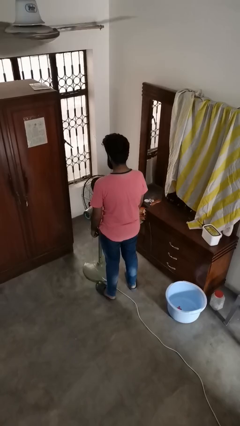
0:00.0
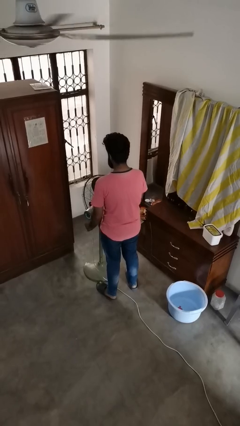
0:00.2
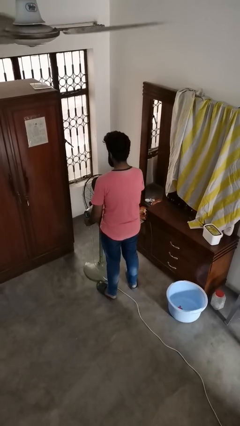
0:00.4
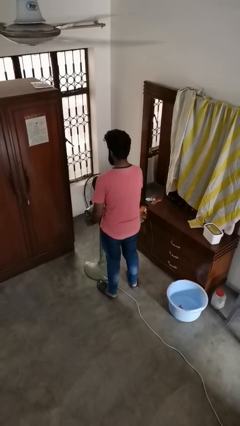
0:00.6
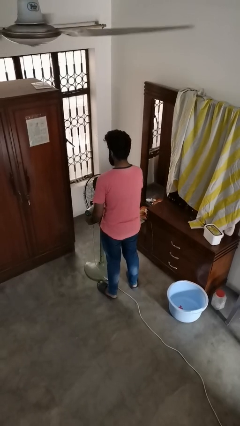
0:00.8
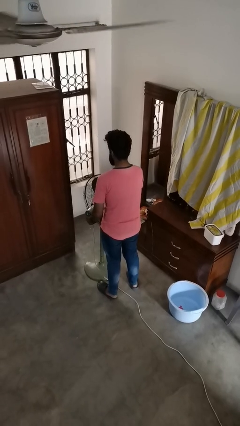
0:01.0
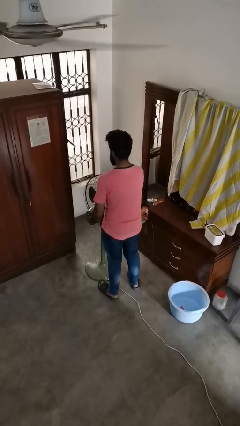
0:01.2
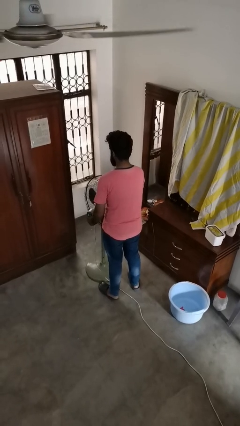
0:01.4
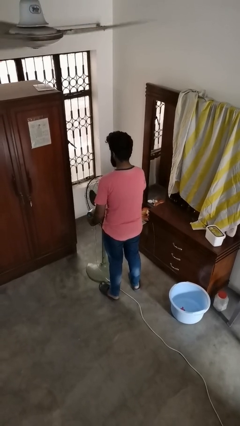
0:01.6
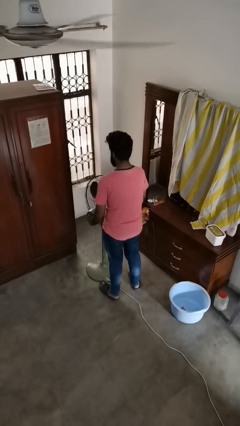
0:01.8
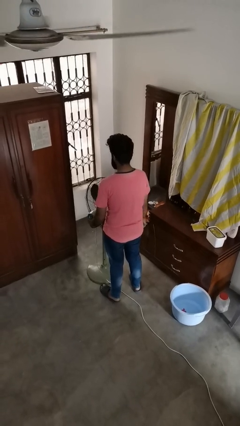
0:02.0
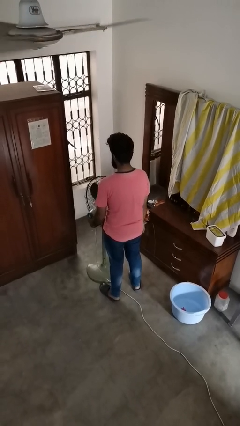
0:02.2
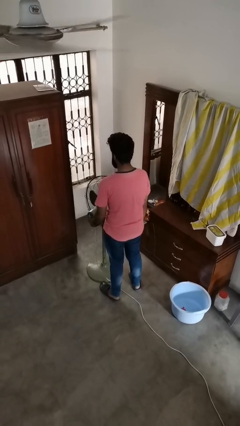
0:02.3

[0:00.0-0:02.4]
person turns on fan

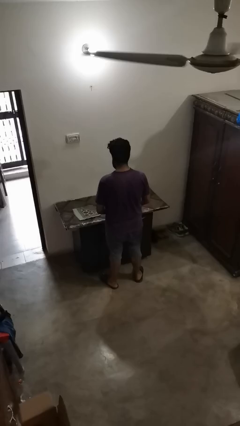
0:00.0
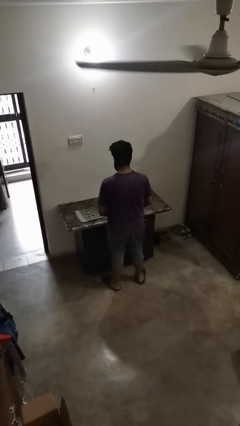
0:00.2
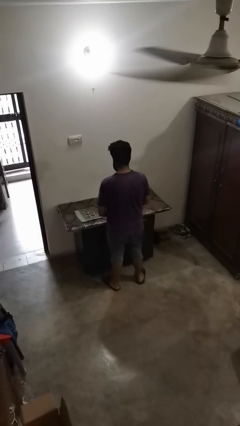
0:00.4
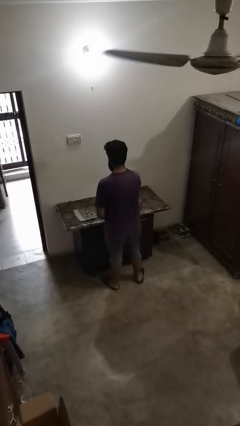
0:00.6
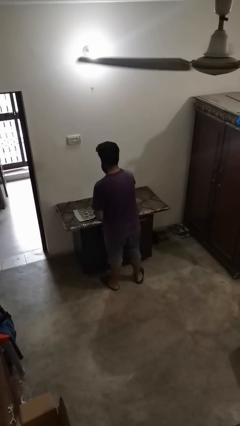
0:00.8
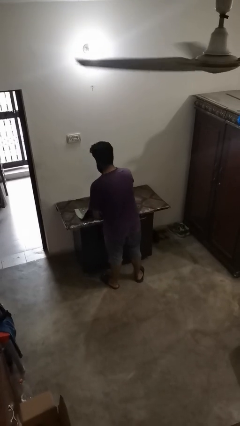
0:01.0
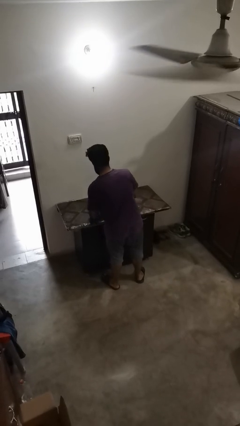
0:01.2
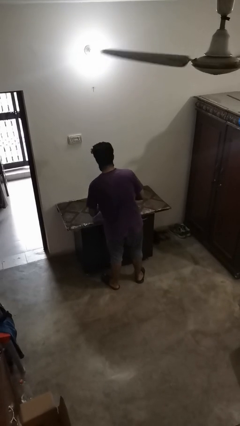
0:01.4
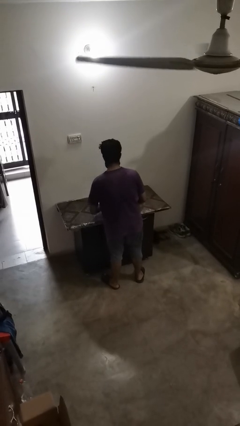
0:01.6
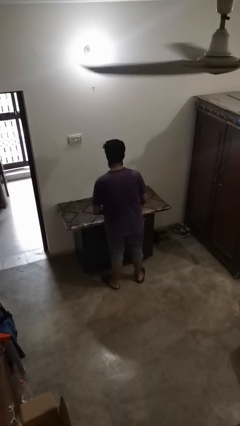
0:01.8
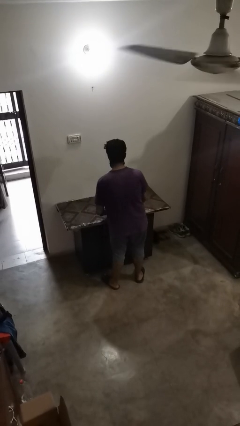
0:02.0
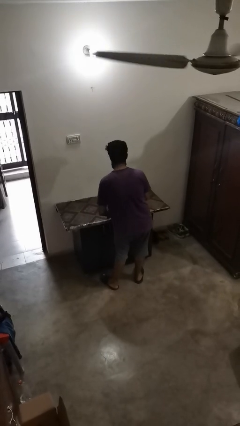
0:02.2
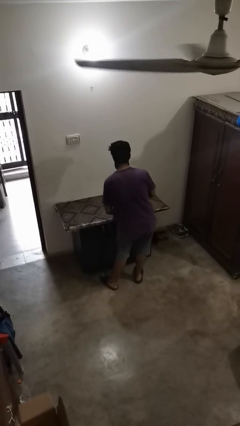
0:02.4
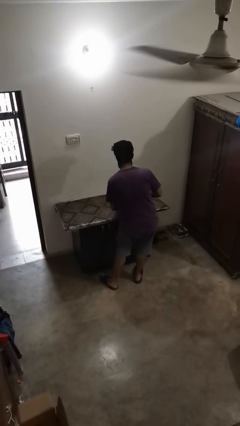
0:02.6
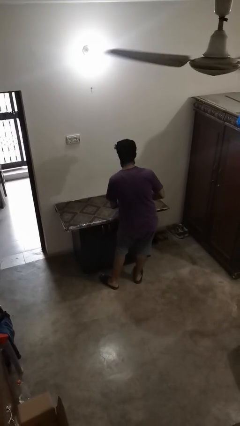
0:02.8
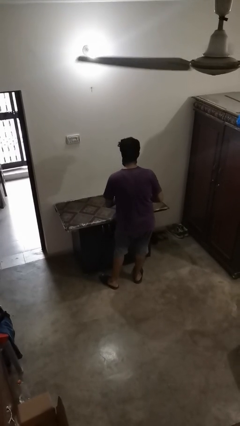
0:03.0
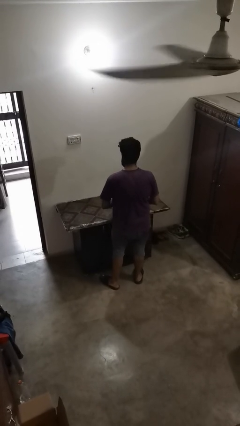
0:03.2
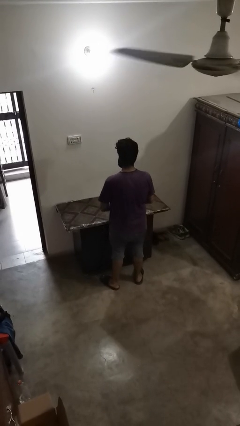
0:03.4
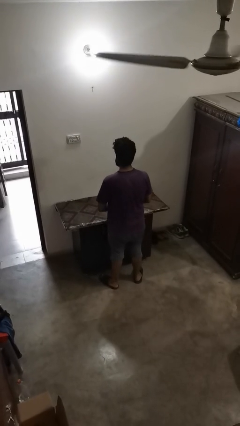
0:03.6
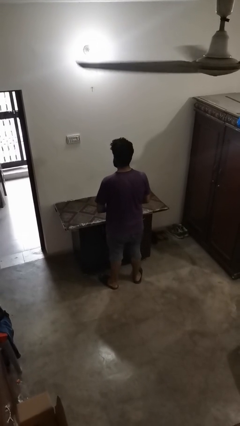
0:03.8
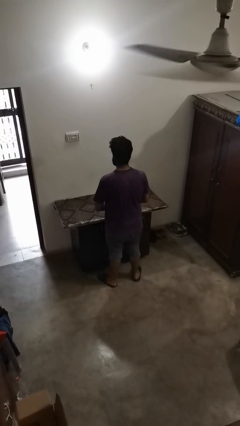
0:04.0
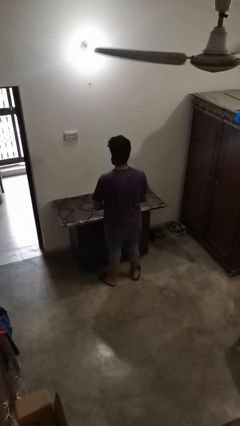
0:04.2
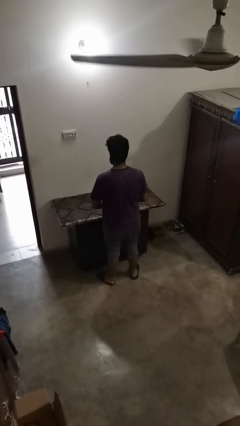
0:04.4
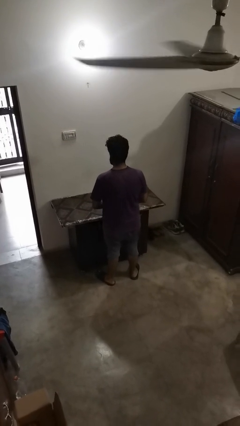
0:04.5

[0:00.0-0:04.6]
person folds tablecloth

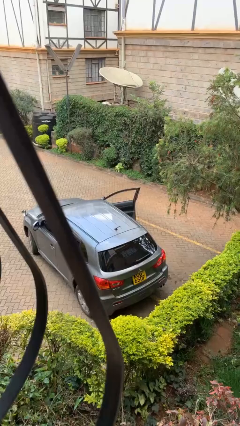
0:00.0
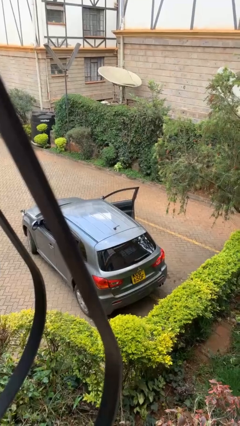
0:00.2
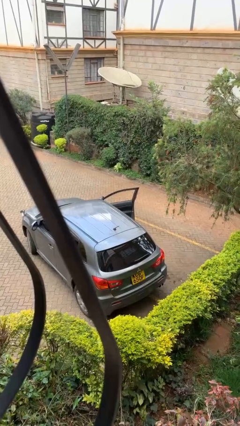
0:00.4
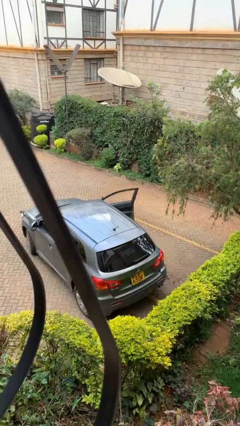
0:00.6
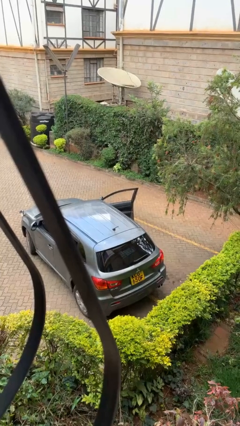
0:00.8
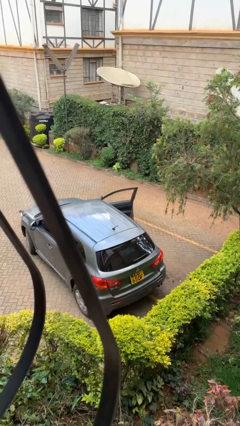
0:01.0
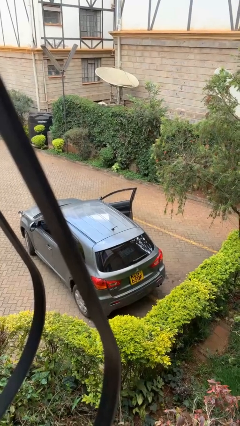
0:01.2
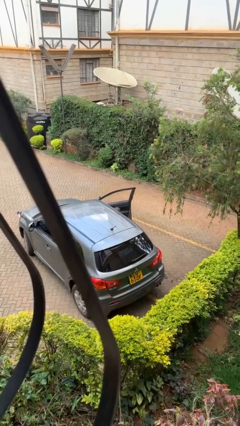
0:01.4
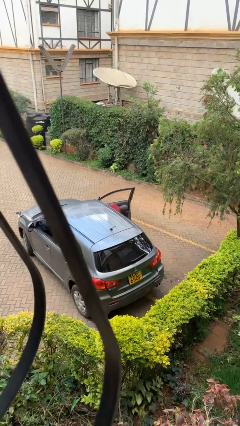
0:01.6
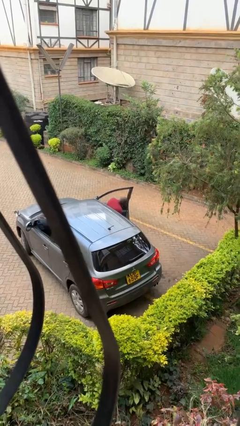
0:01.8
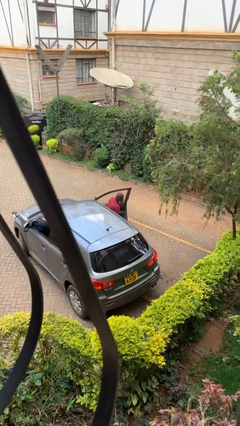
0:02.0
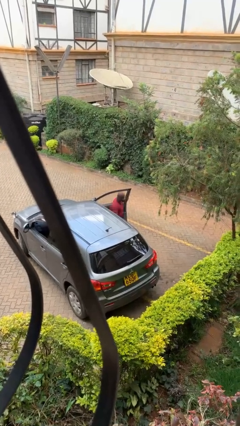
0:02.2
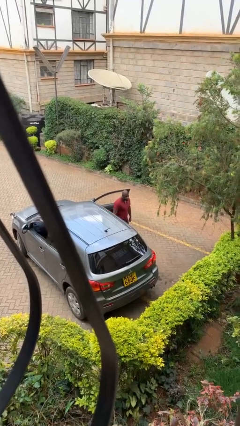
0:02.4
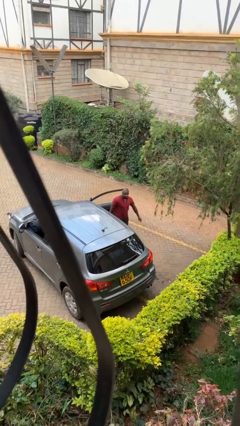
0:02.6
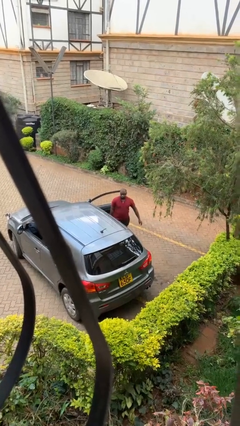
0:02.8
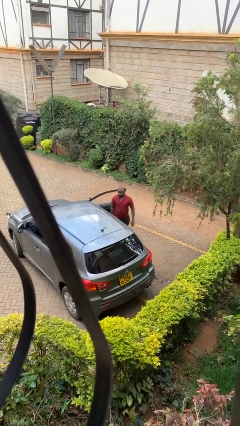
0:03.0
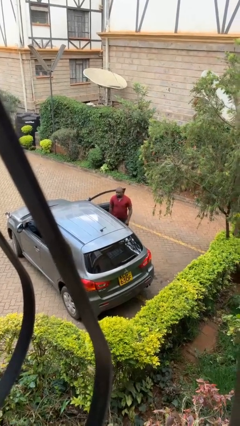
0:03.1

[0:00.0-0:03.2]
person exits car

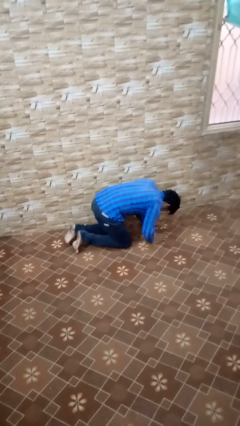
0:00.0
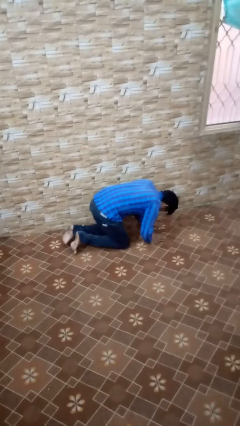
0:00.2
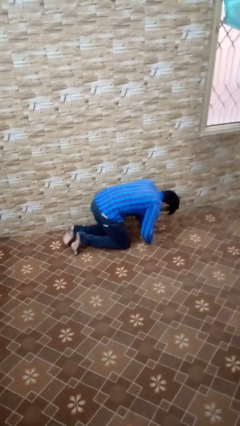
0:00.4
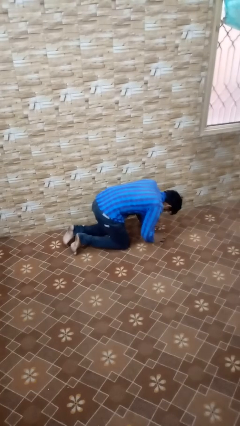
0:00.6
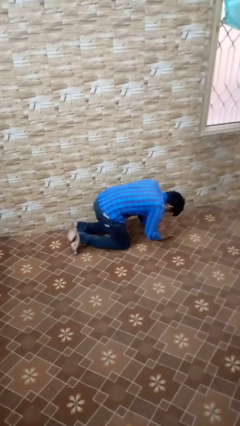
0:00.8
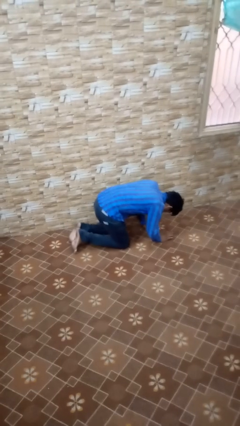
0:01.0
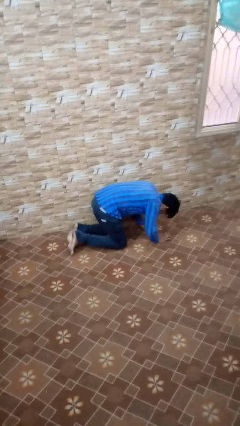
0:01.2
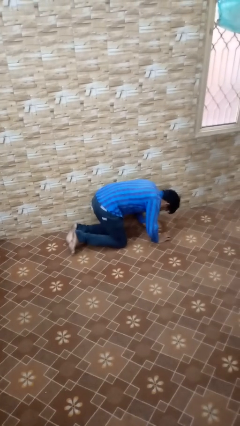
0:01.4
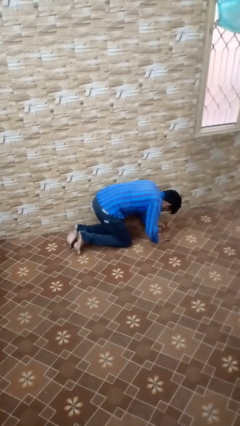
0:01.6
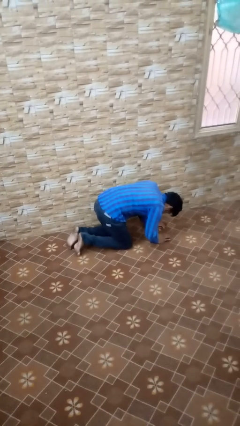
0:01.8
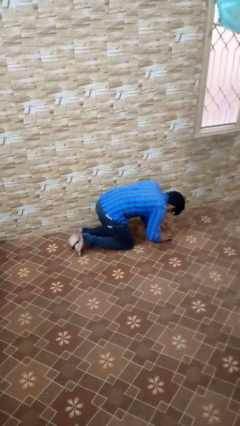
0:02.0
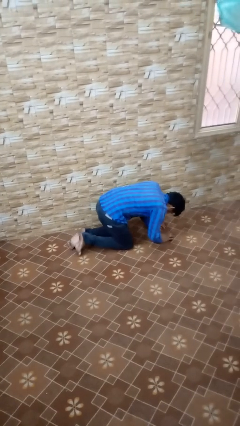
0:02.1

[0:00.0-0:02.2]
person crawls

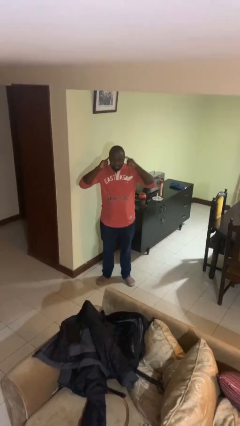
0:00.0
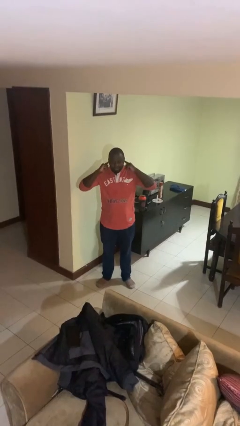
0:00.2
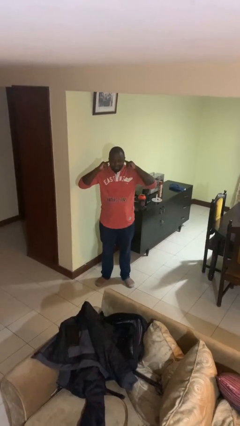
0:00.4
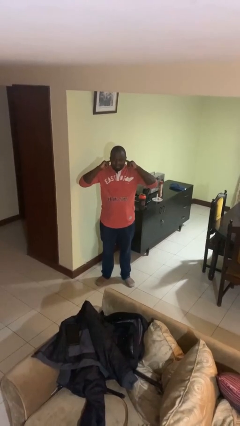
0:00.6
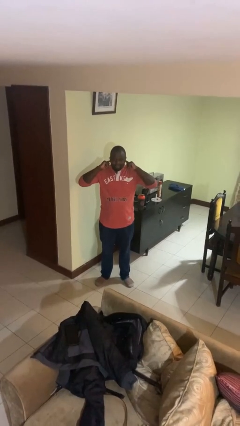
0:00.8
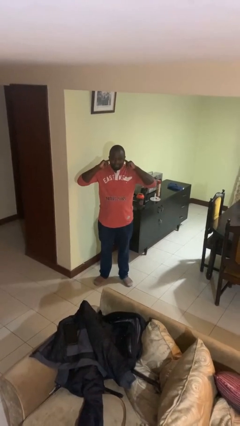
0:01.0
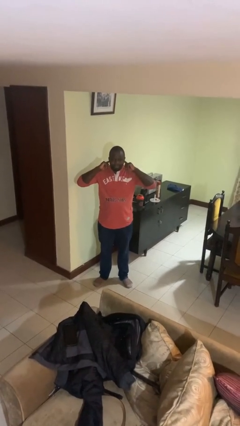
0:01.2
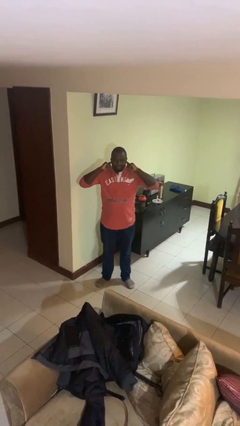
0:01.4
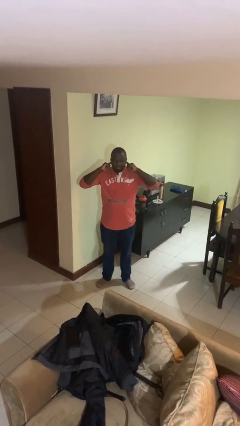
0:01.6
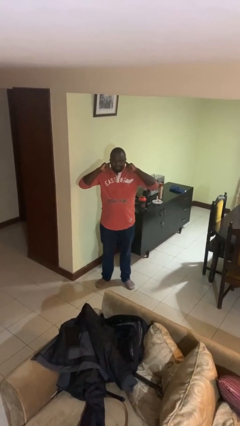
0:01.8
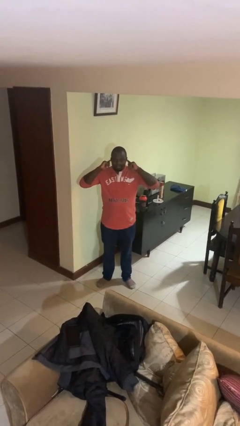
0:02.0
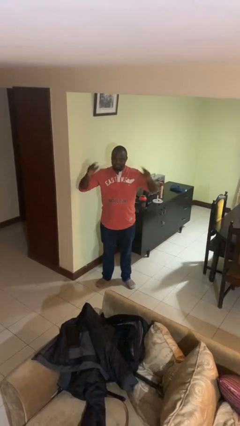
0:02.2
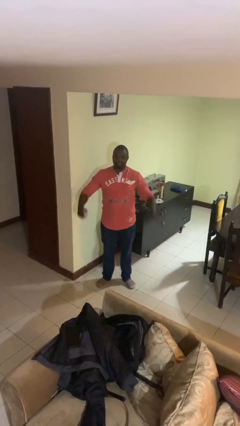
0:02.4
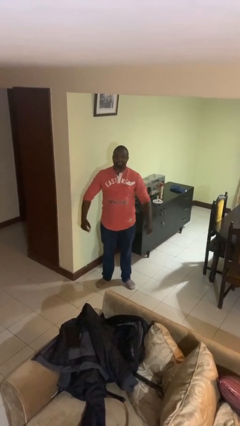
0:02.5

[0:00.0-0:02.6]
person puts fingers in ear

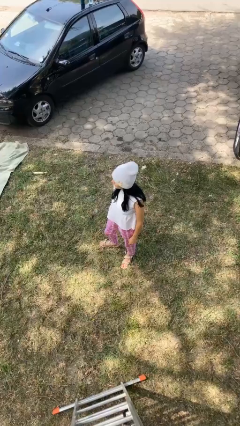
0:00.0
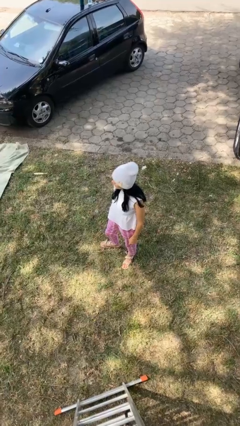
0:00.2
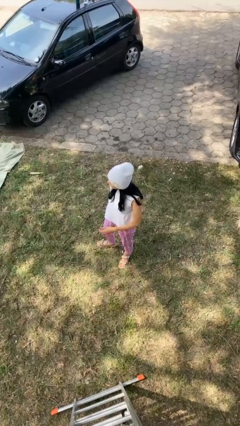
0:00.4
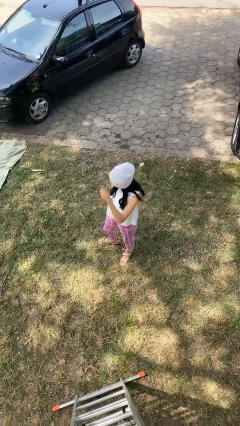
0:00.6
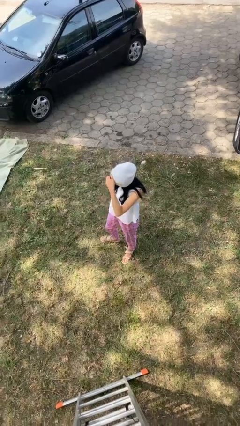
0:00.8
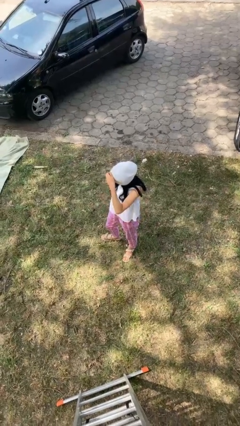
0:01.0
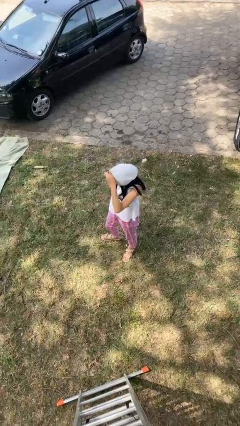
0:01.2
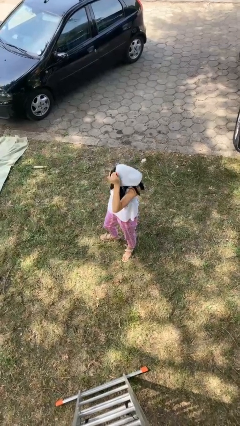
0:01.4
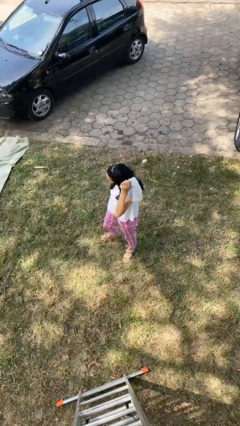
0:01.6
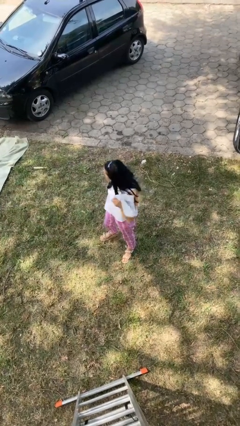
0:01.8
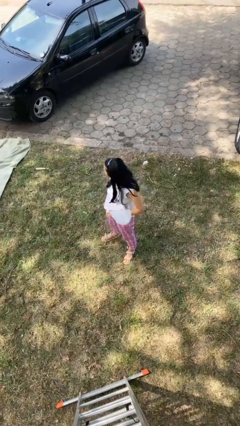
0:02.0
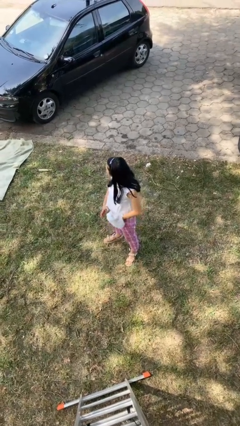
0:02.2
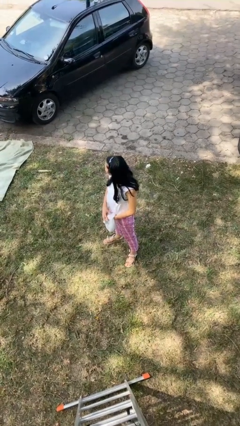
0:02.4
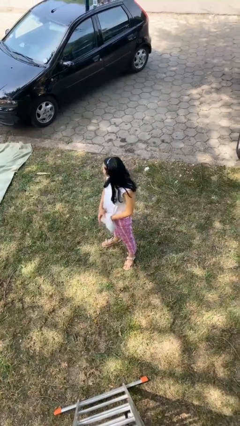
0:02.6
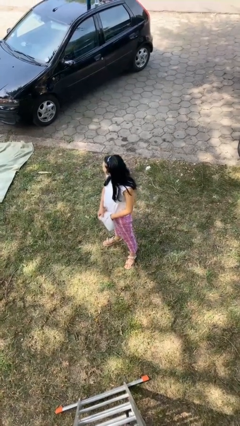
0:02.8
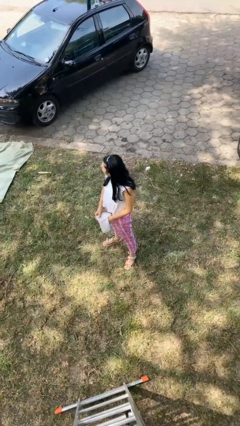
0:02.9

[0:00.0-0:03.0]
person takes off hat
